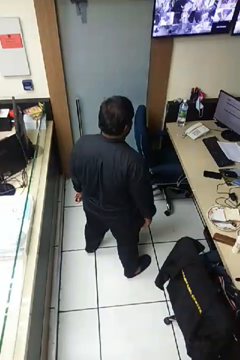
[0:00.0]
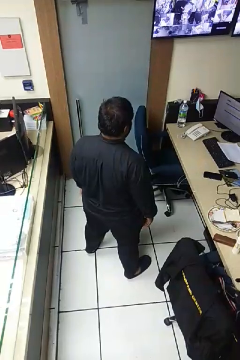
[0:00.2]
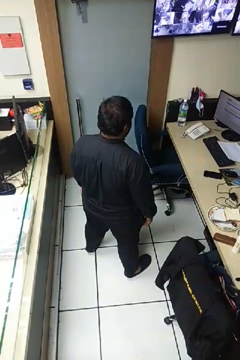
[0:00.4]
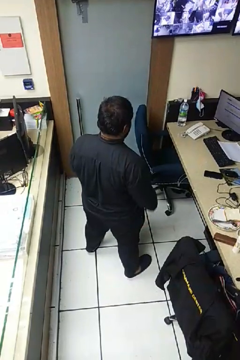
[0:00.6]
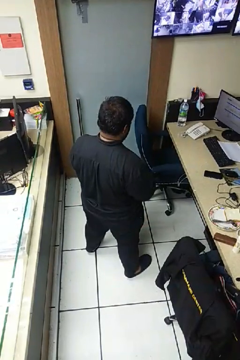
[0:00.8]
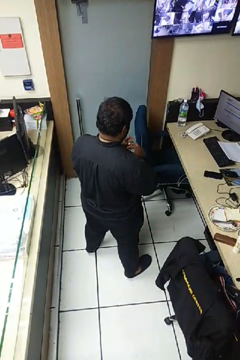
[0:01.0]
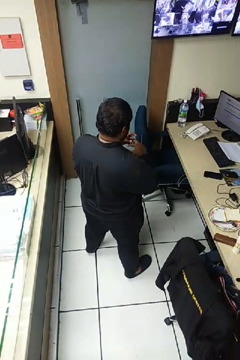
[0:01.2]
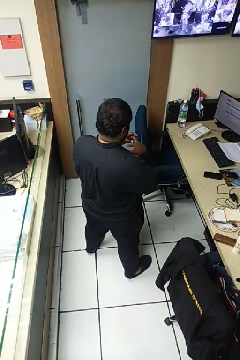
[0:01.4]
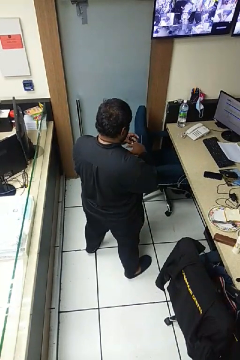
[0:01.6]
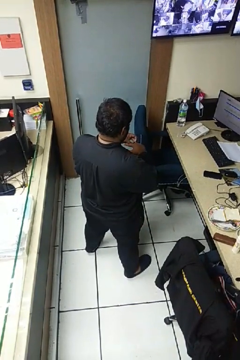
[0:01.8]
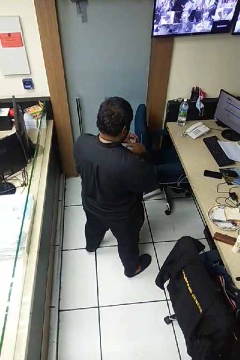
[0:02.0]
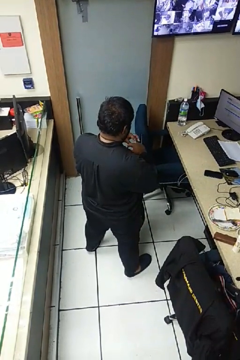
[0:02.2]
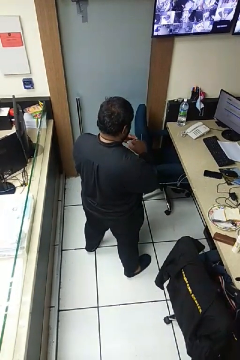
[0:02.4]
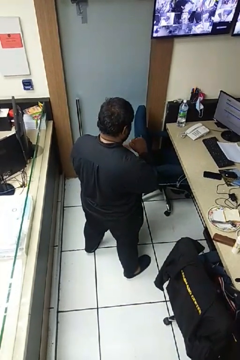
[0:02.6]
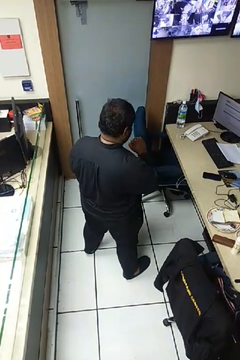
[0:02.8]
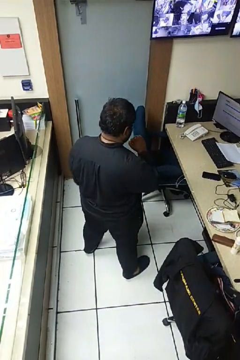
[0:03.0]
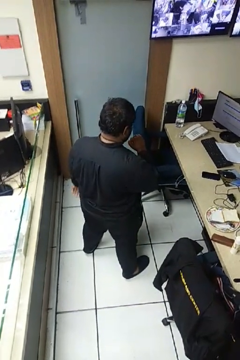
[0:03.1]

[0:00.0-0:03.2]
person puts on ring

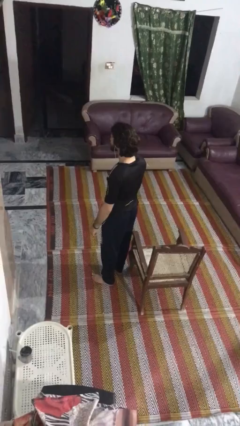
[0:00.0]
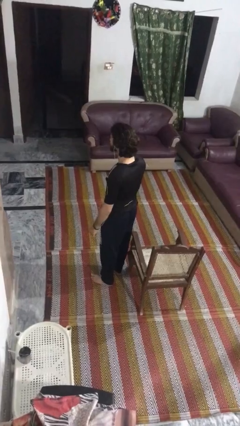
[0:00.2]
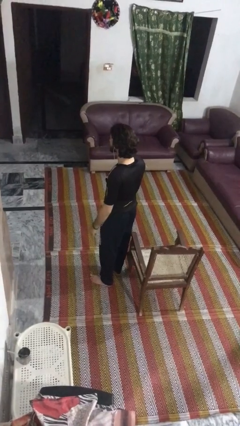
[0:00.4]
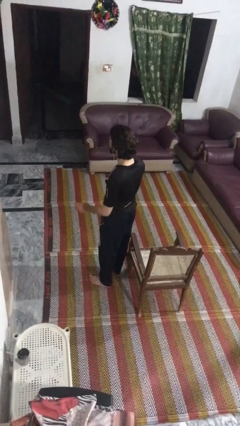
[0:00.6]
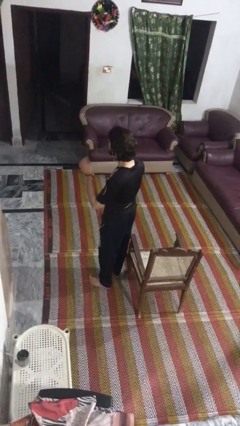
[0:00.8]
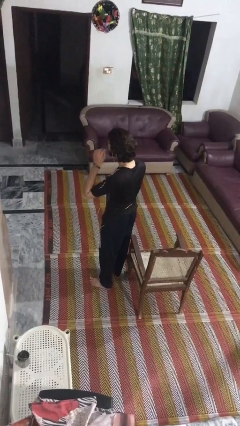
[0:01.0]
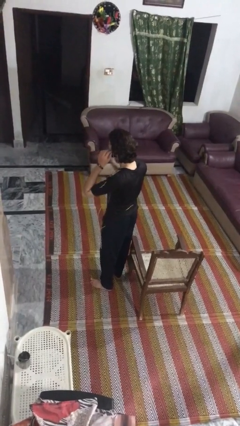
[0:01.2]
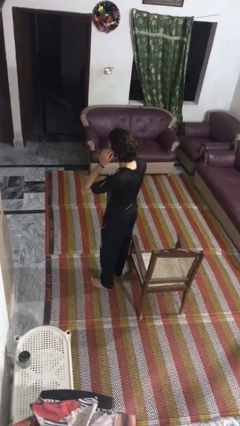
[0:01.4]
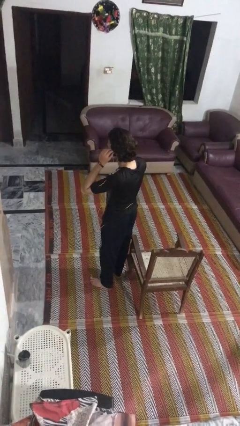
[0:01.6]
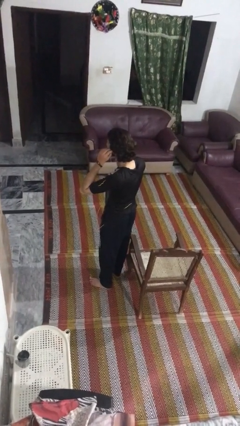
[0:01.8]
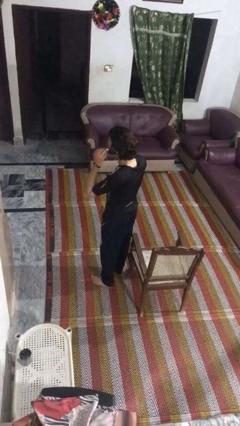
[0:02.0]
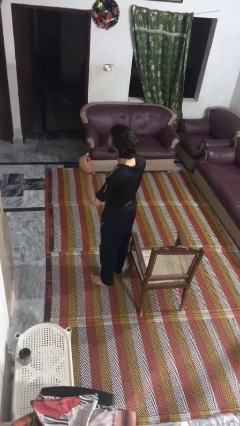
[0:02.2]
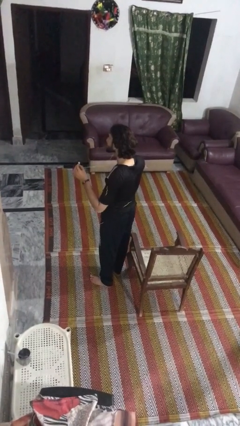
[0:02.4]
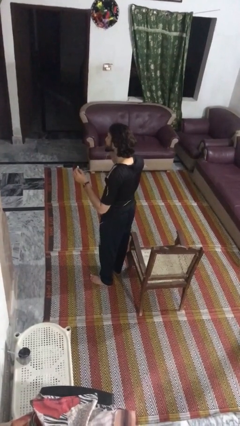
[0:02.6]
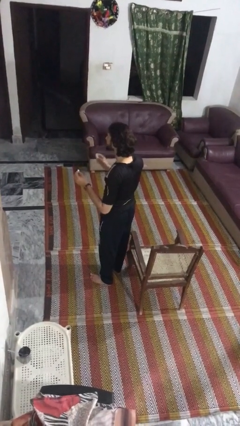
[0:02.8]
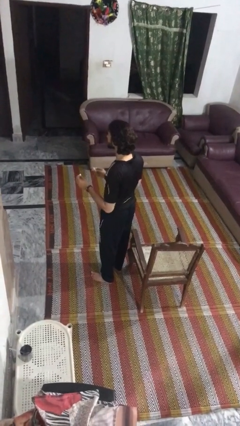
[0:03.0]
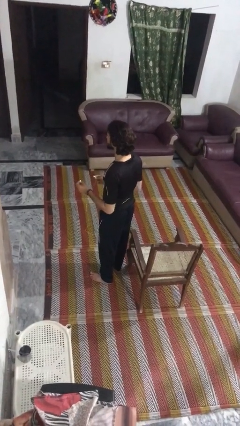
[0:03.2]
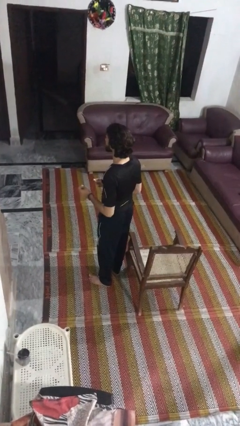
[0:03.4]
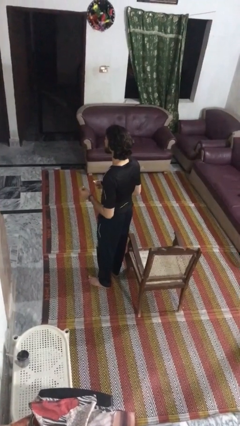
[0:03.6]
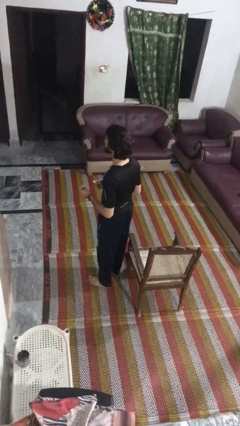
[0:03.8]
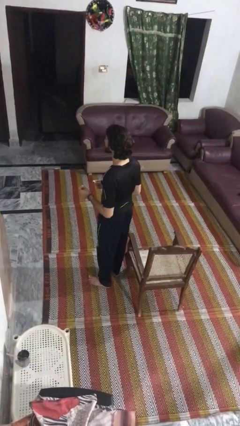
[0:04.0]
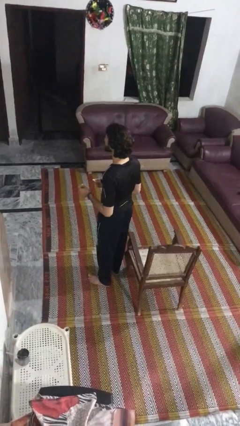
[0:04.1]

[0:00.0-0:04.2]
person takes off headphones

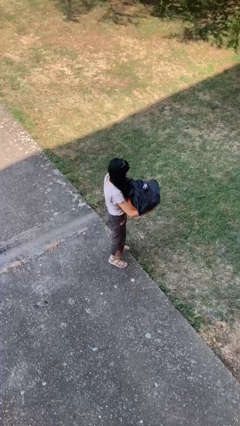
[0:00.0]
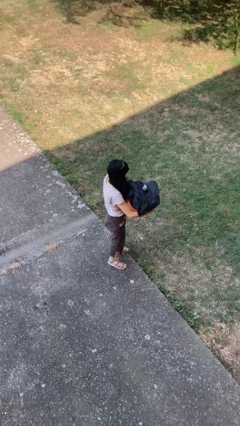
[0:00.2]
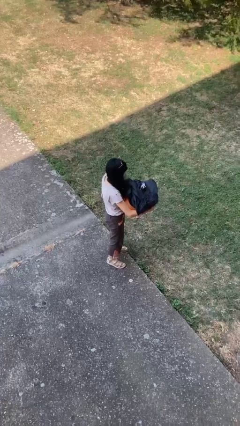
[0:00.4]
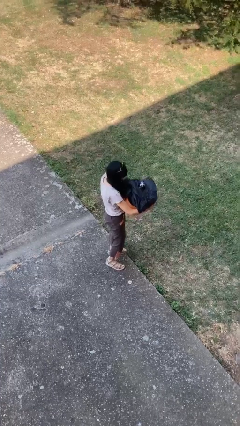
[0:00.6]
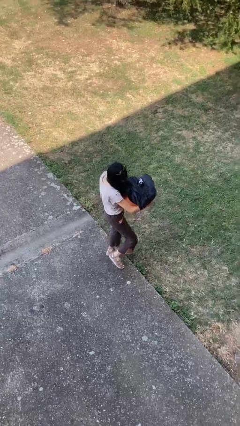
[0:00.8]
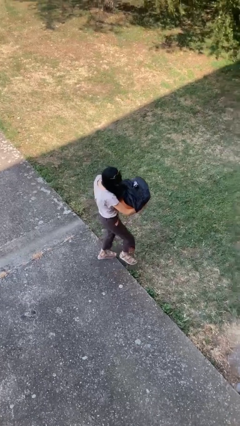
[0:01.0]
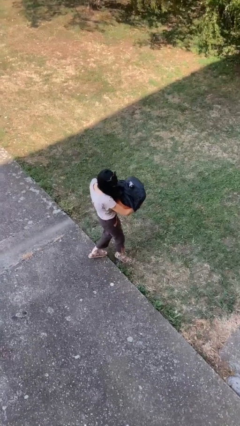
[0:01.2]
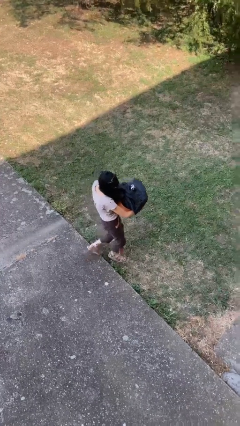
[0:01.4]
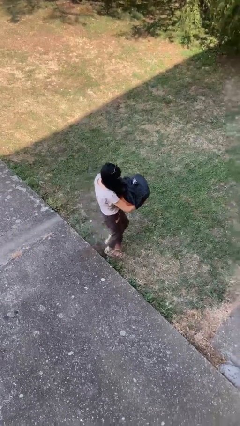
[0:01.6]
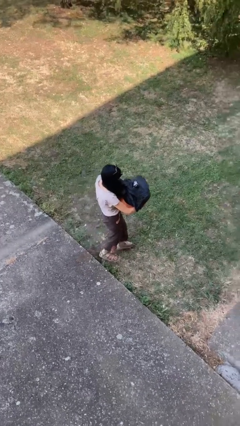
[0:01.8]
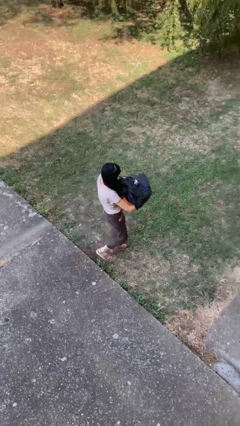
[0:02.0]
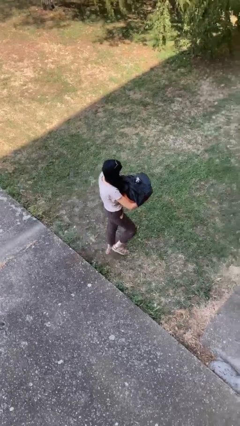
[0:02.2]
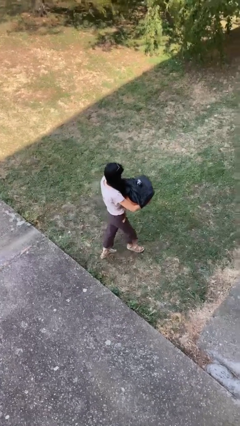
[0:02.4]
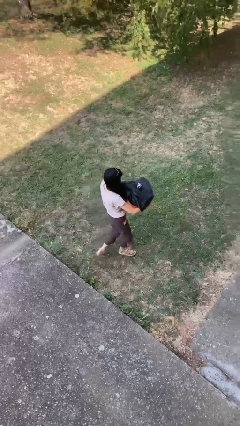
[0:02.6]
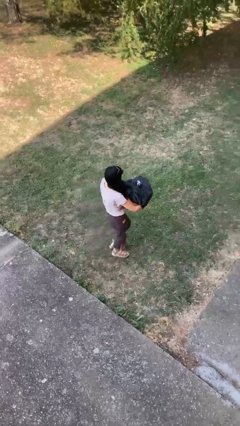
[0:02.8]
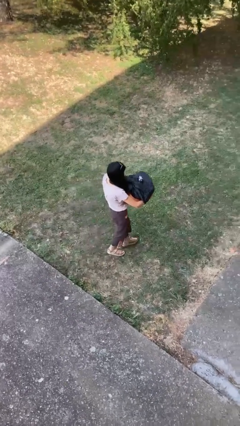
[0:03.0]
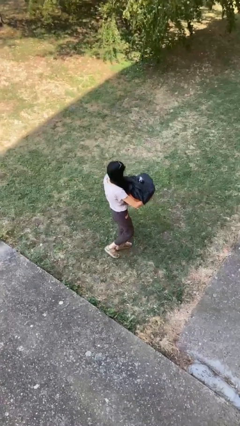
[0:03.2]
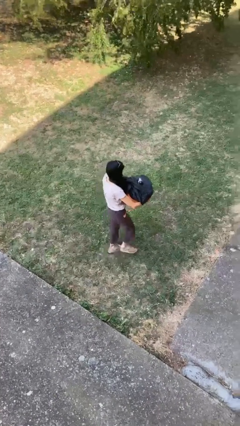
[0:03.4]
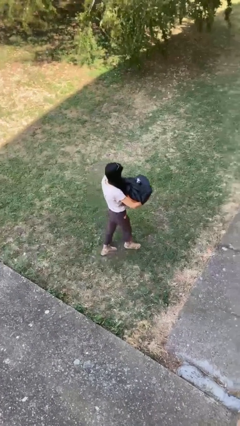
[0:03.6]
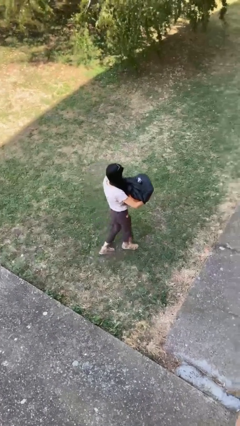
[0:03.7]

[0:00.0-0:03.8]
person carries laundry basket

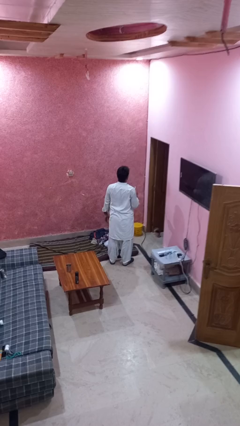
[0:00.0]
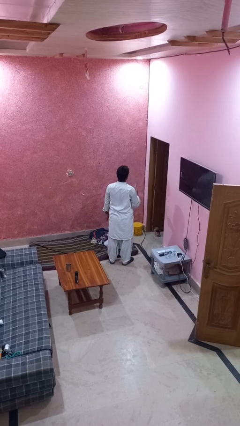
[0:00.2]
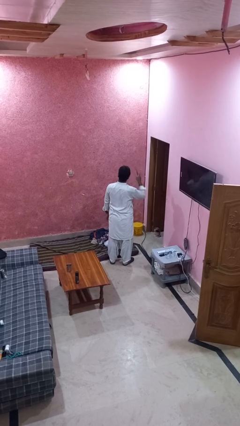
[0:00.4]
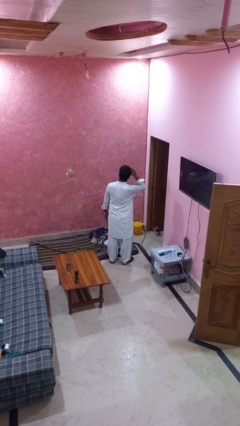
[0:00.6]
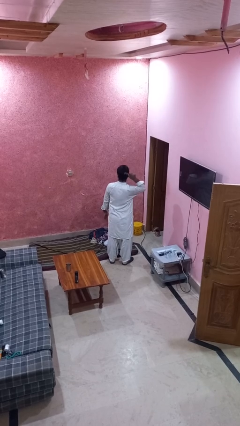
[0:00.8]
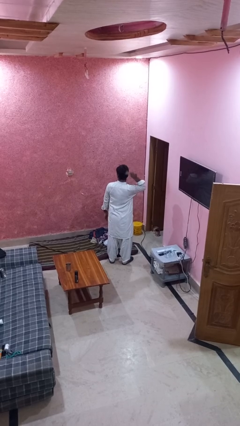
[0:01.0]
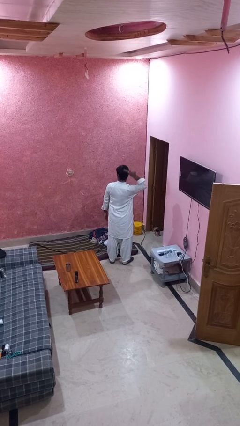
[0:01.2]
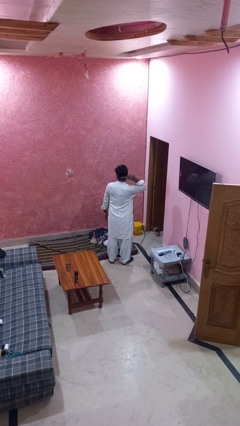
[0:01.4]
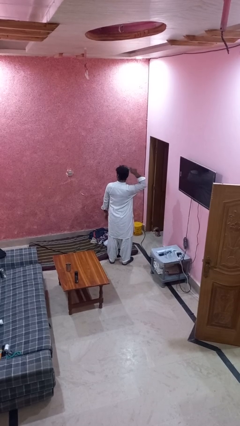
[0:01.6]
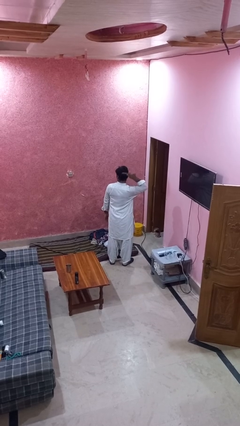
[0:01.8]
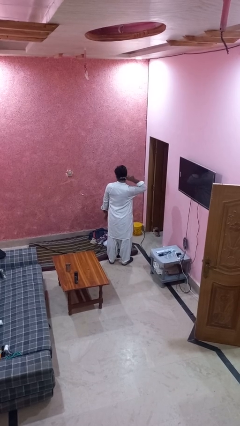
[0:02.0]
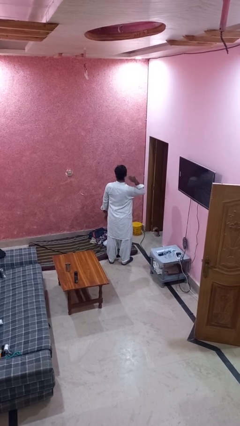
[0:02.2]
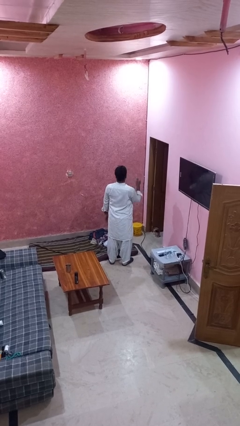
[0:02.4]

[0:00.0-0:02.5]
person brushes hair

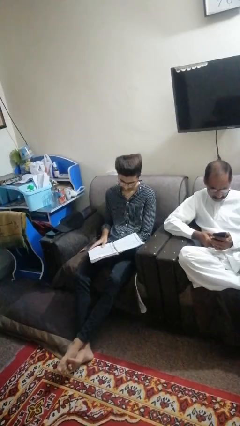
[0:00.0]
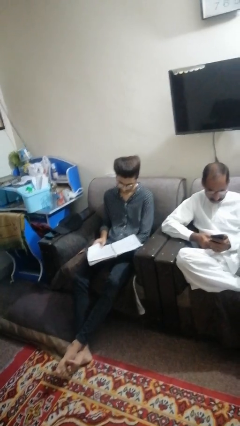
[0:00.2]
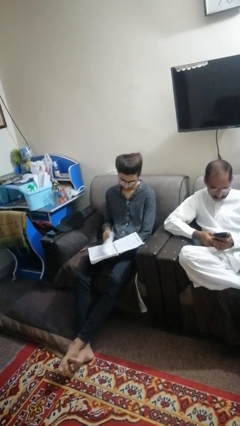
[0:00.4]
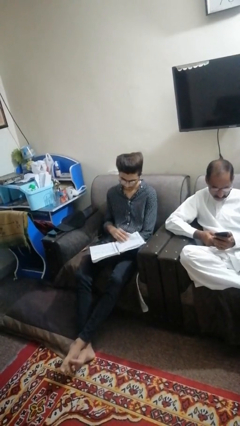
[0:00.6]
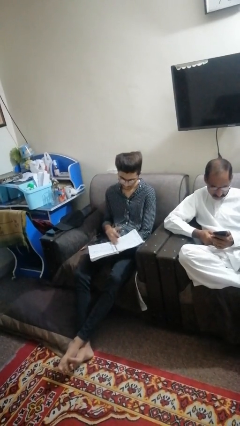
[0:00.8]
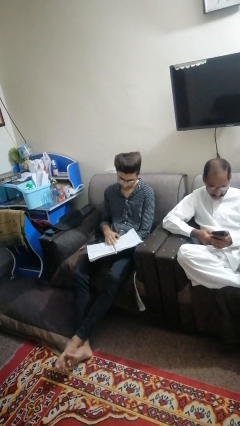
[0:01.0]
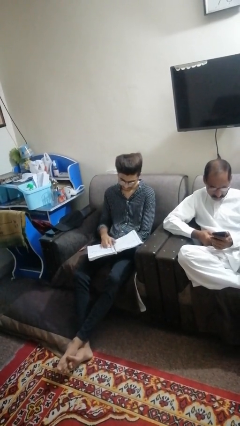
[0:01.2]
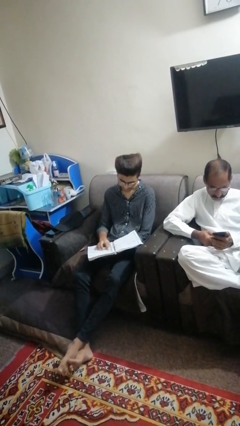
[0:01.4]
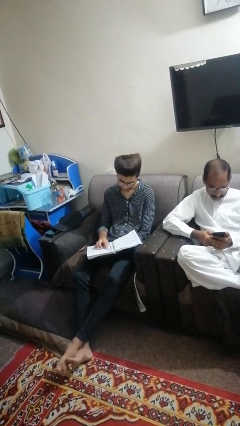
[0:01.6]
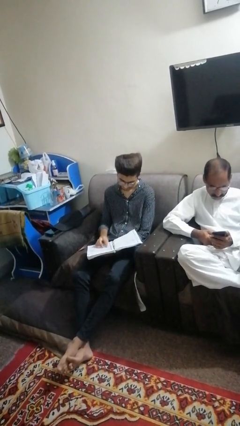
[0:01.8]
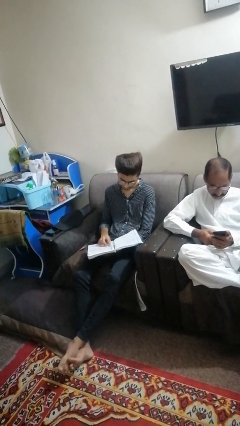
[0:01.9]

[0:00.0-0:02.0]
person reads magazine

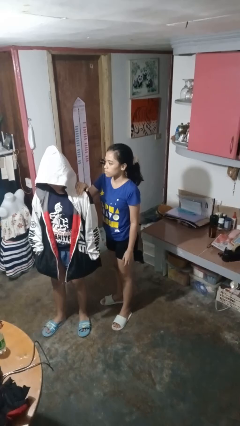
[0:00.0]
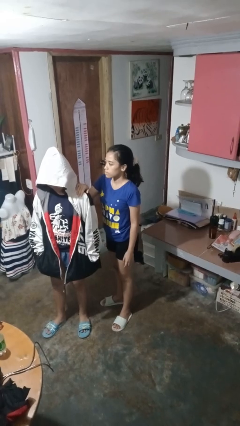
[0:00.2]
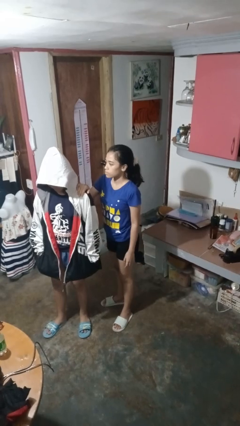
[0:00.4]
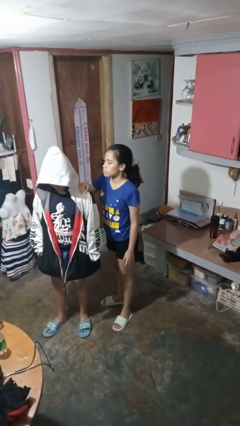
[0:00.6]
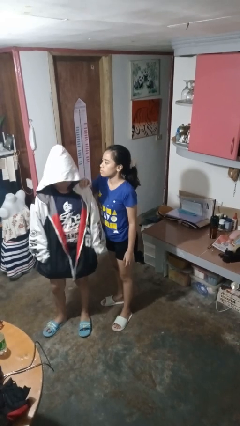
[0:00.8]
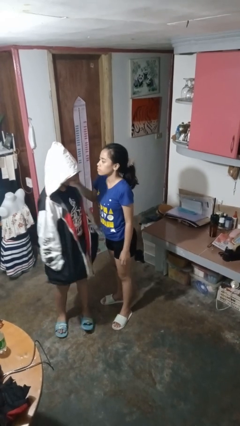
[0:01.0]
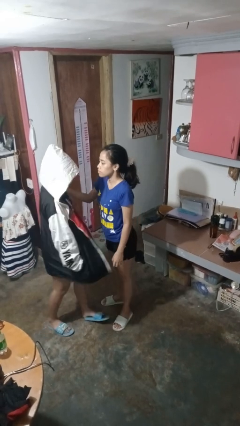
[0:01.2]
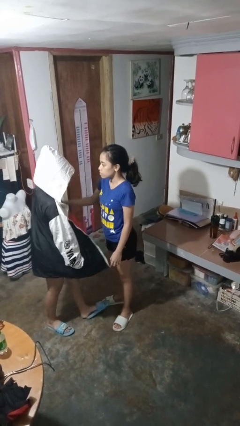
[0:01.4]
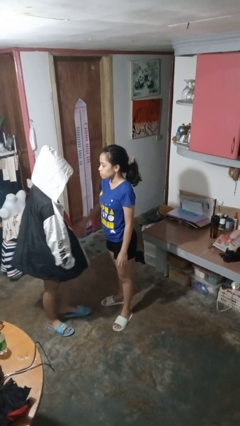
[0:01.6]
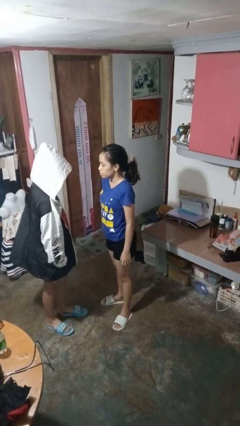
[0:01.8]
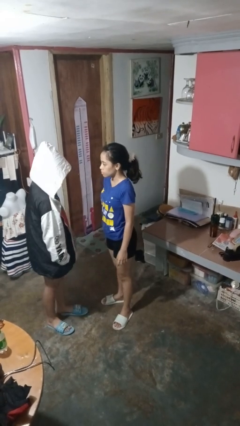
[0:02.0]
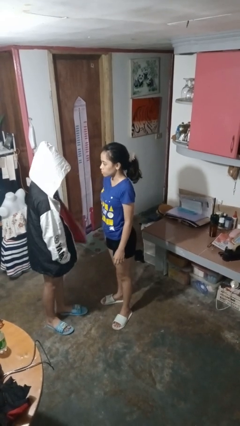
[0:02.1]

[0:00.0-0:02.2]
person spins person around
